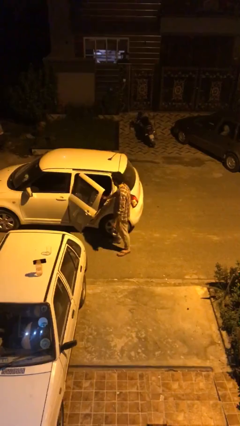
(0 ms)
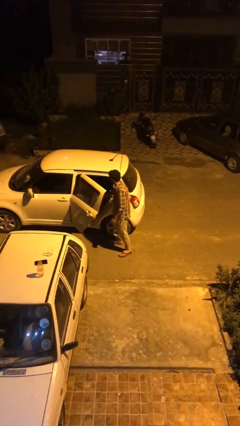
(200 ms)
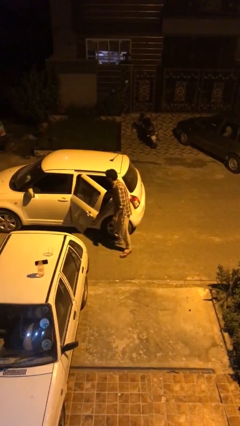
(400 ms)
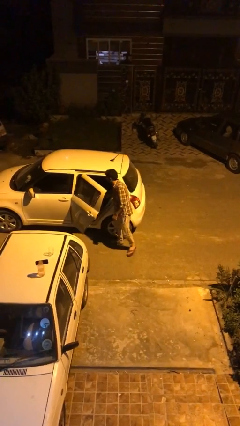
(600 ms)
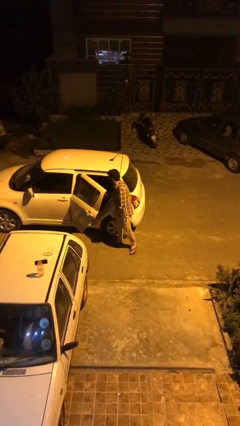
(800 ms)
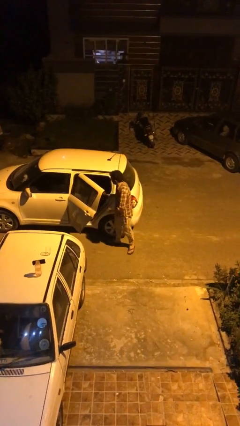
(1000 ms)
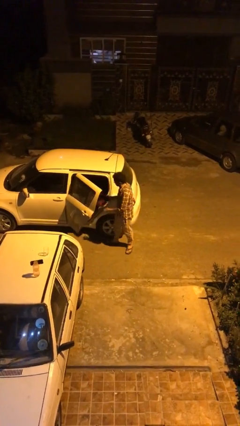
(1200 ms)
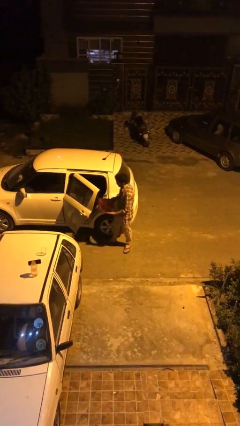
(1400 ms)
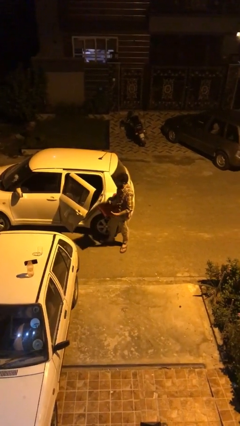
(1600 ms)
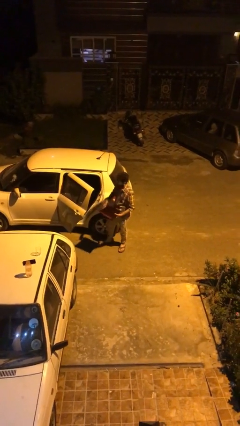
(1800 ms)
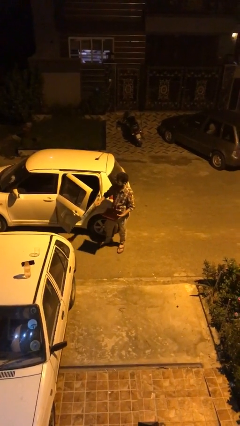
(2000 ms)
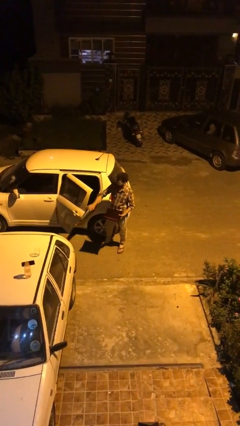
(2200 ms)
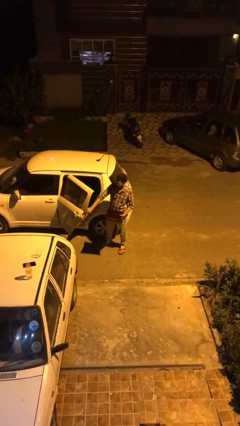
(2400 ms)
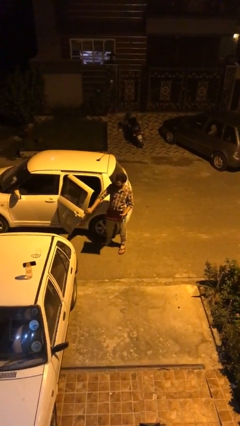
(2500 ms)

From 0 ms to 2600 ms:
person unloads car

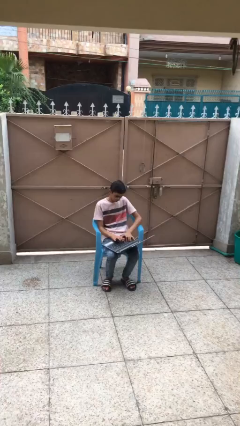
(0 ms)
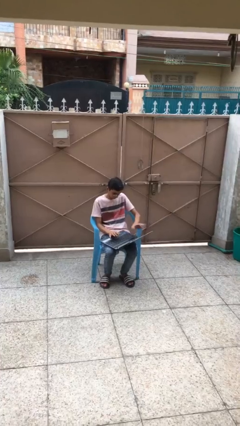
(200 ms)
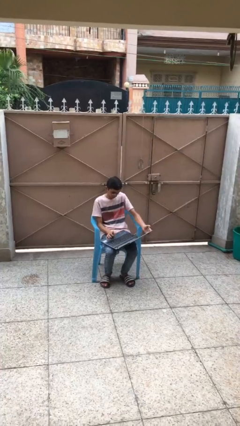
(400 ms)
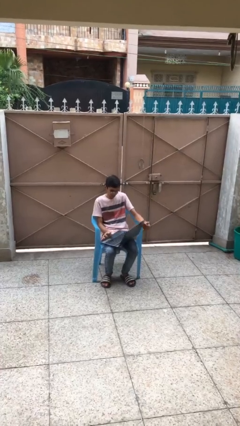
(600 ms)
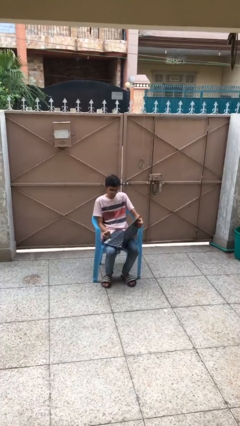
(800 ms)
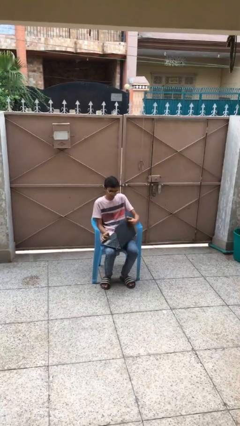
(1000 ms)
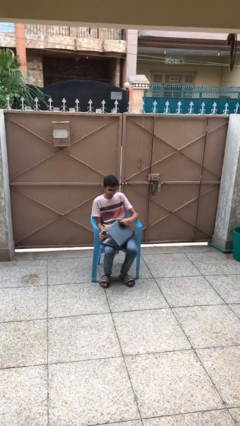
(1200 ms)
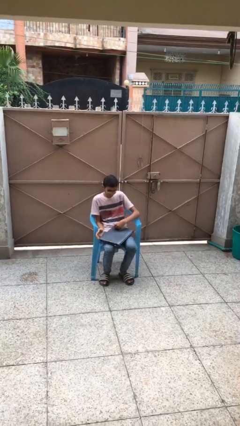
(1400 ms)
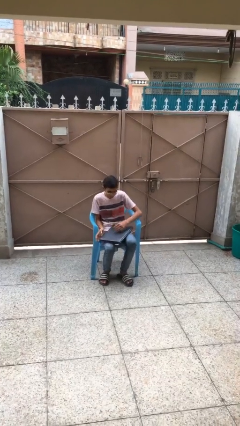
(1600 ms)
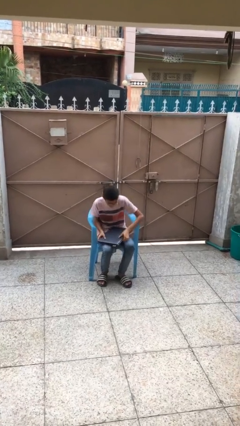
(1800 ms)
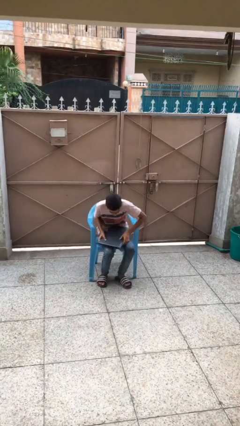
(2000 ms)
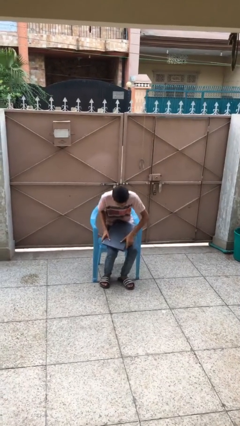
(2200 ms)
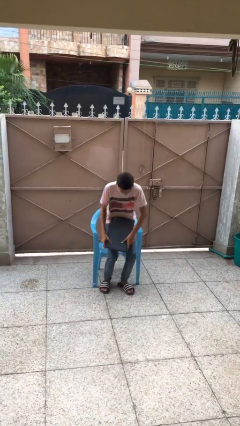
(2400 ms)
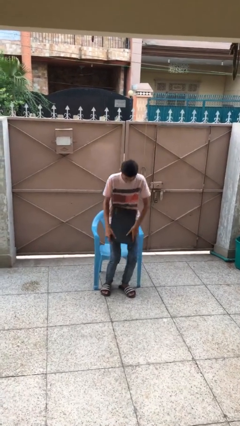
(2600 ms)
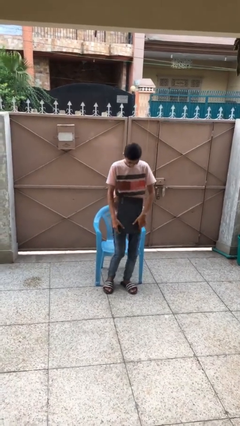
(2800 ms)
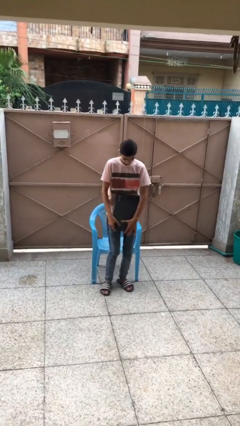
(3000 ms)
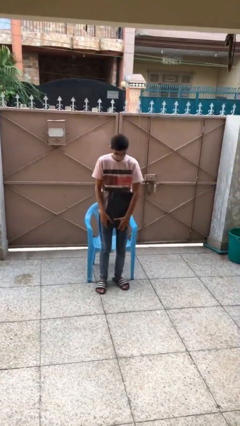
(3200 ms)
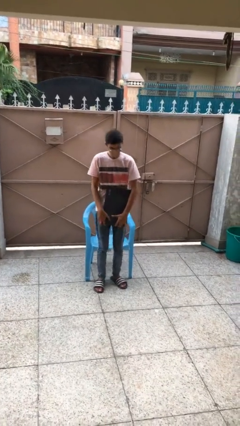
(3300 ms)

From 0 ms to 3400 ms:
person stands up

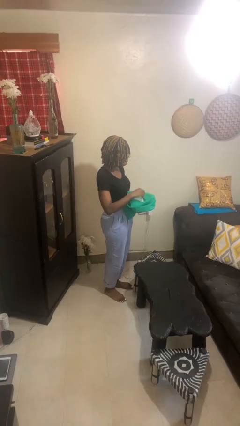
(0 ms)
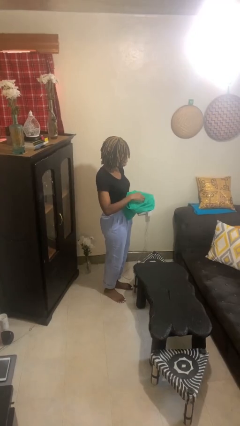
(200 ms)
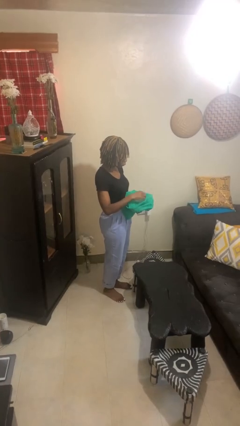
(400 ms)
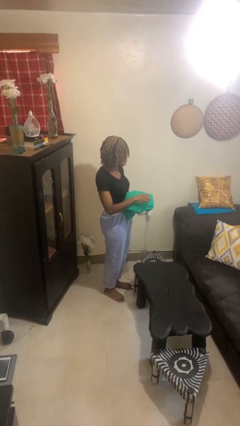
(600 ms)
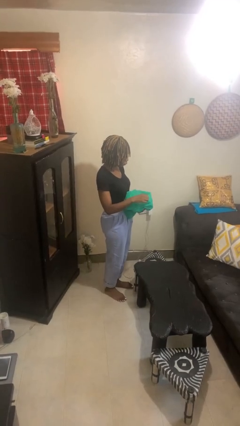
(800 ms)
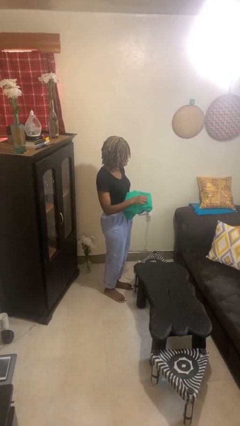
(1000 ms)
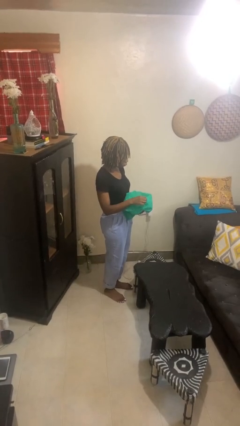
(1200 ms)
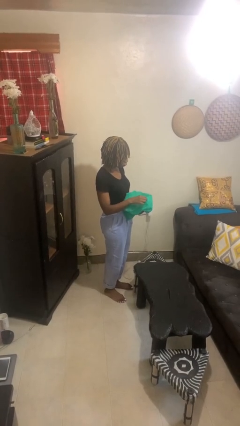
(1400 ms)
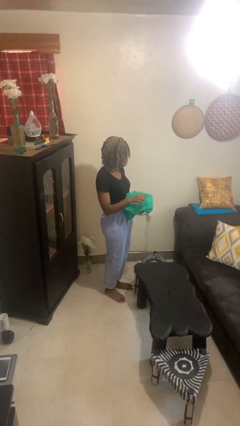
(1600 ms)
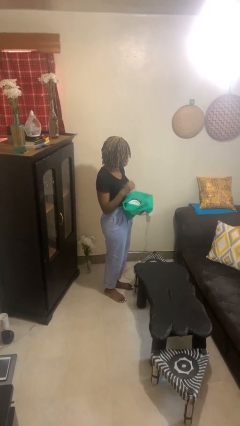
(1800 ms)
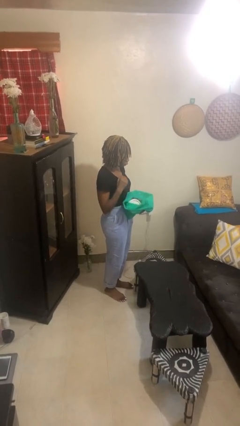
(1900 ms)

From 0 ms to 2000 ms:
person puts object into bag

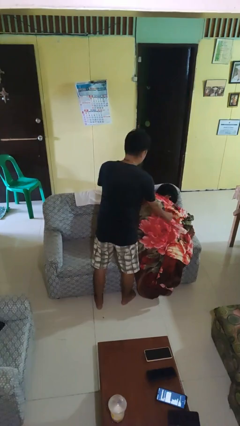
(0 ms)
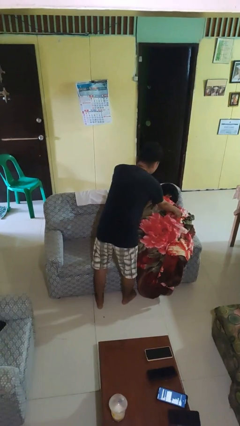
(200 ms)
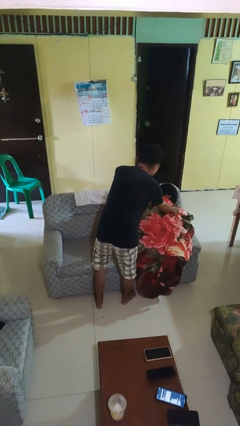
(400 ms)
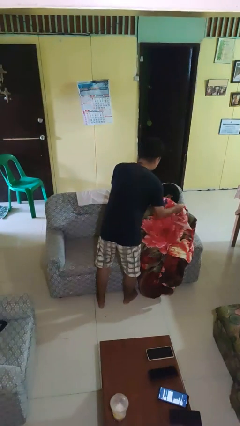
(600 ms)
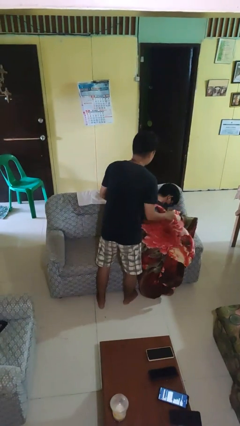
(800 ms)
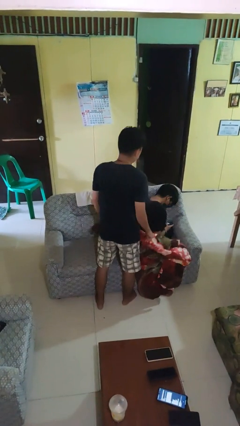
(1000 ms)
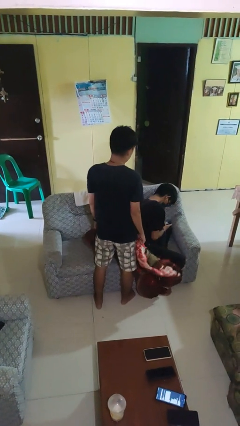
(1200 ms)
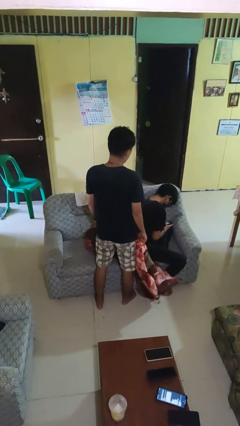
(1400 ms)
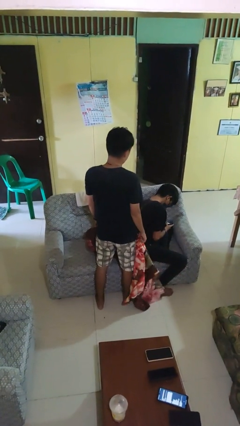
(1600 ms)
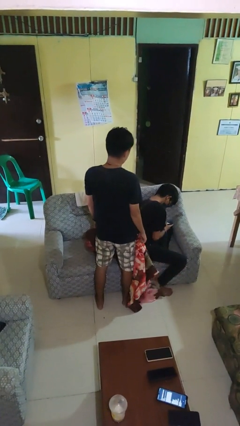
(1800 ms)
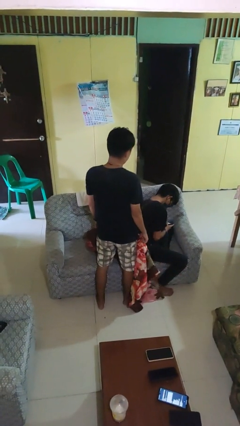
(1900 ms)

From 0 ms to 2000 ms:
person uncovers friend with blanket

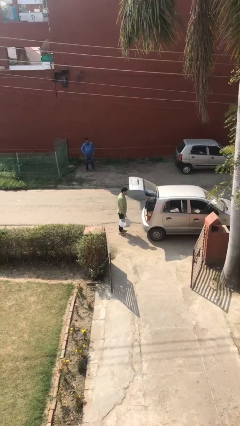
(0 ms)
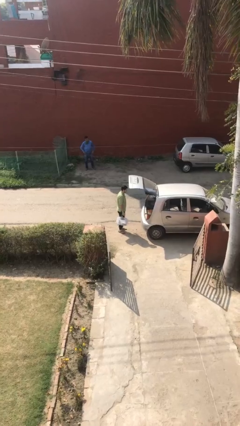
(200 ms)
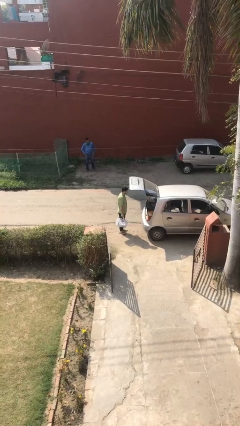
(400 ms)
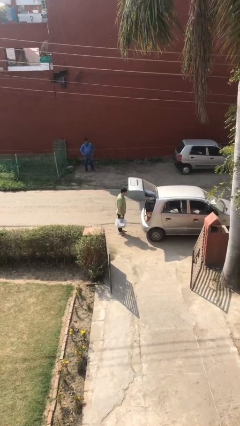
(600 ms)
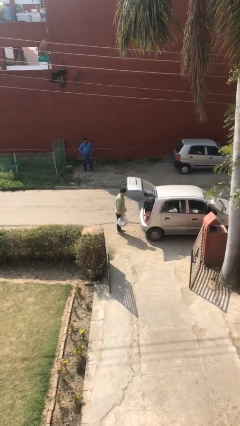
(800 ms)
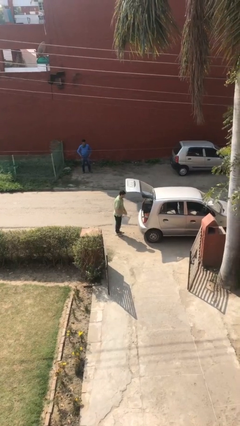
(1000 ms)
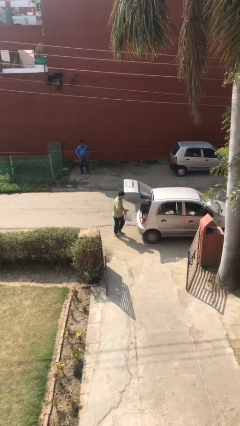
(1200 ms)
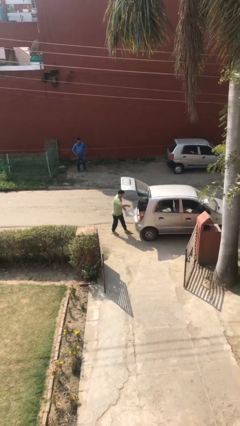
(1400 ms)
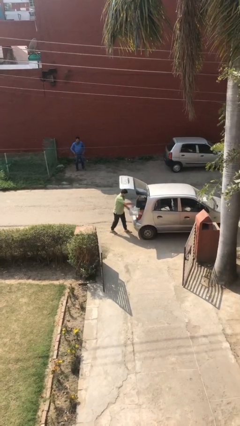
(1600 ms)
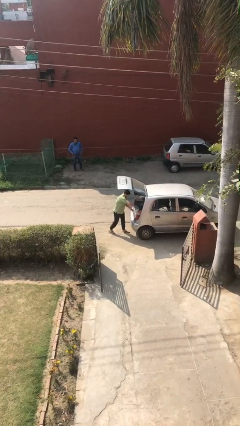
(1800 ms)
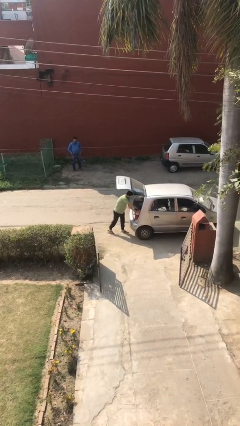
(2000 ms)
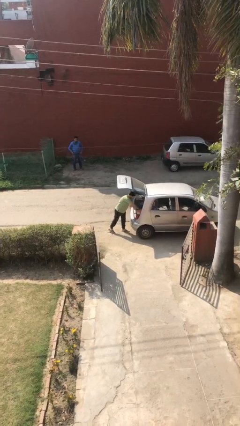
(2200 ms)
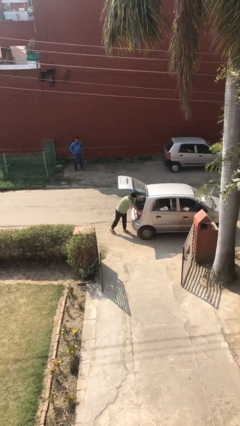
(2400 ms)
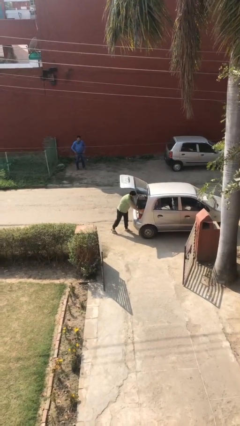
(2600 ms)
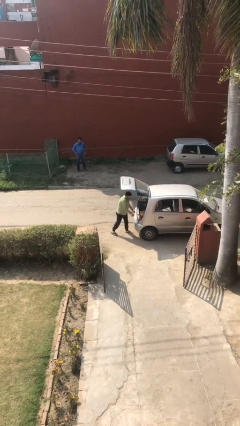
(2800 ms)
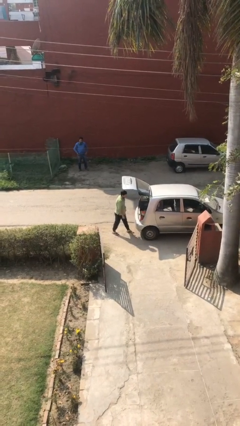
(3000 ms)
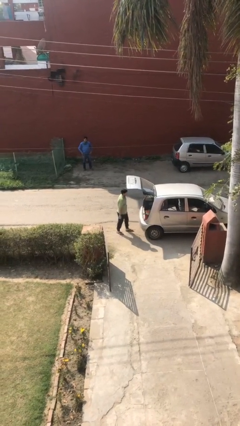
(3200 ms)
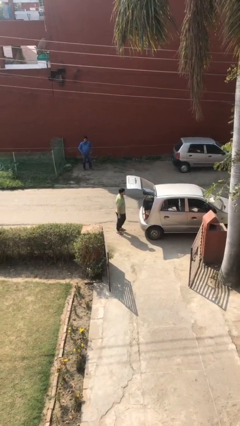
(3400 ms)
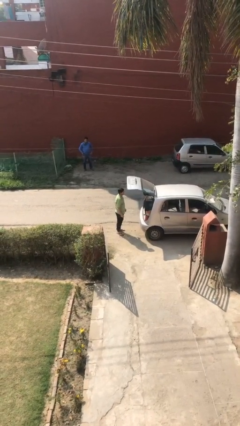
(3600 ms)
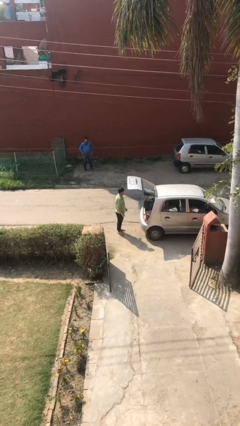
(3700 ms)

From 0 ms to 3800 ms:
person loads car

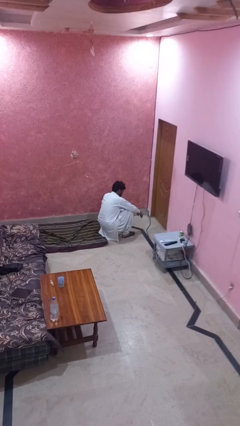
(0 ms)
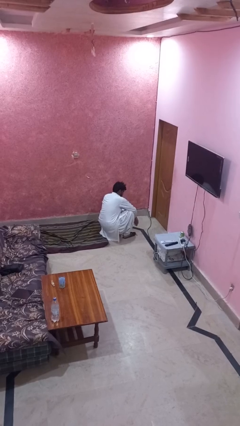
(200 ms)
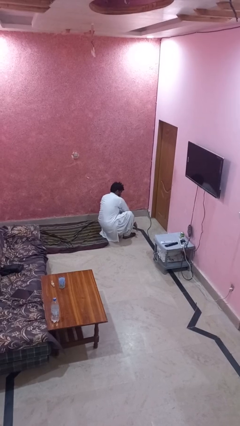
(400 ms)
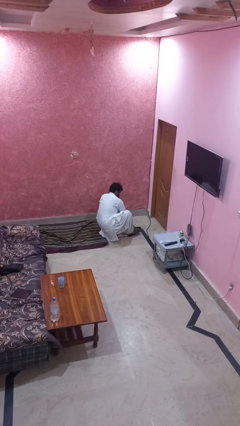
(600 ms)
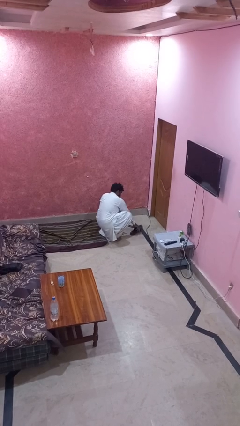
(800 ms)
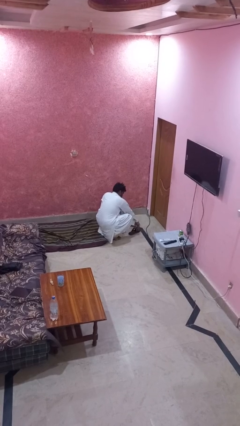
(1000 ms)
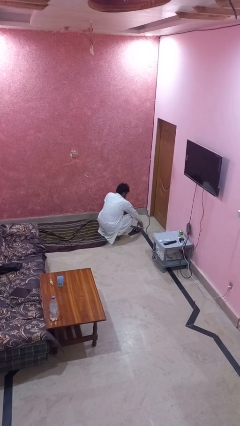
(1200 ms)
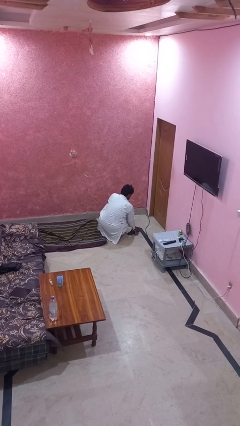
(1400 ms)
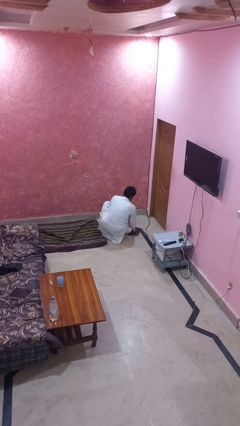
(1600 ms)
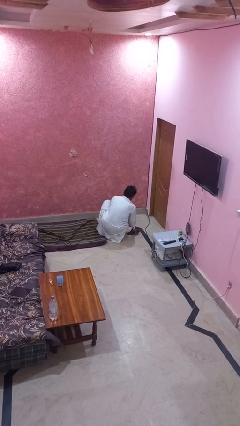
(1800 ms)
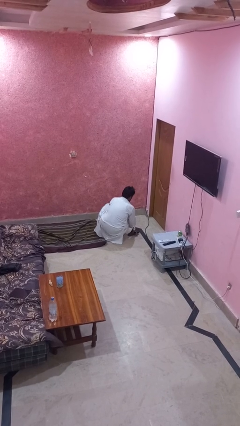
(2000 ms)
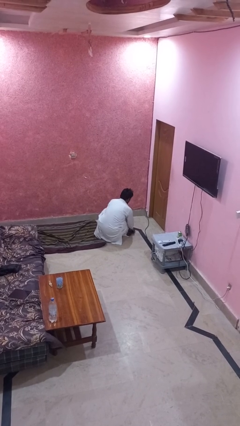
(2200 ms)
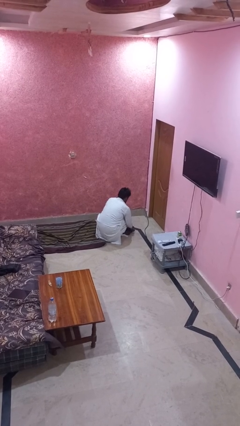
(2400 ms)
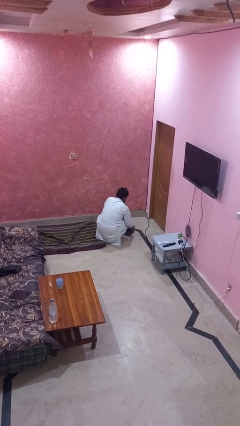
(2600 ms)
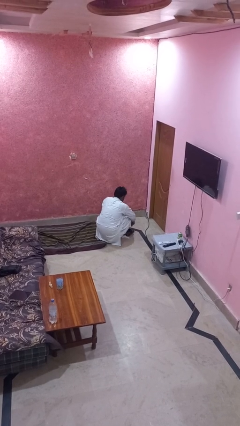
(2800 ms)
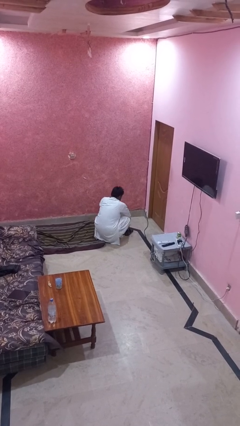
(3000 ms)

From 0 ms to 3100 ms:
person takes off shoes

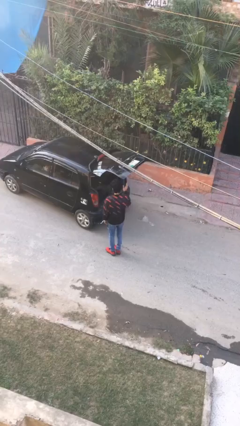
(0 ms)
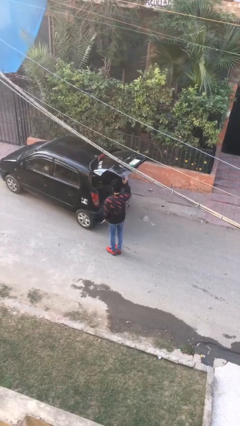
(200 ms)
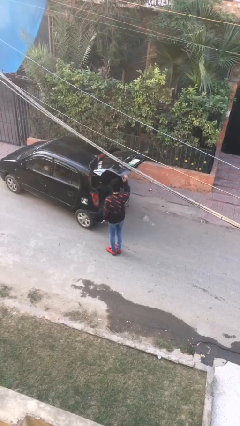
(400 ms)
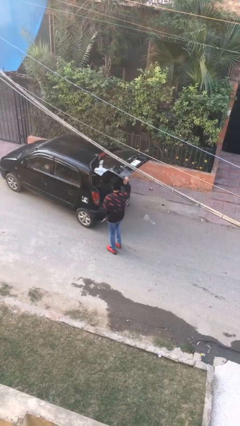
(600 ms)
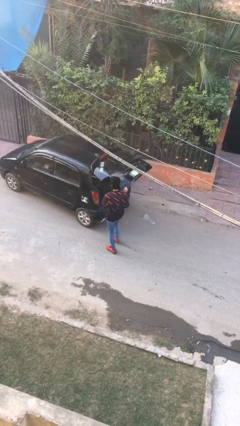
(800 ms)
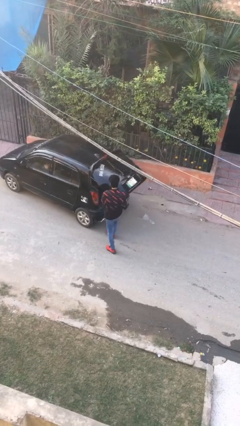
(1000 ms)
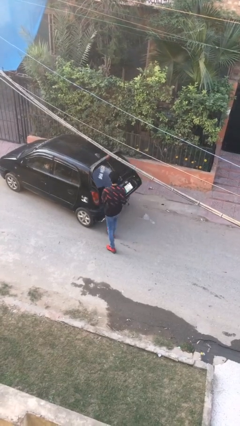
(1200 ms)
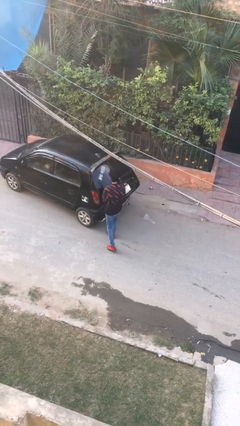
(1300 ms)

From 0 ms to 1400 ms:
person closes car trunk
